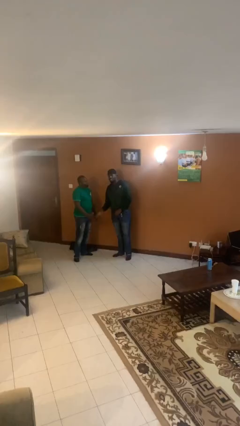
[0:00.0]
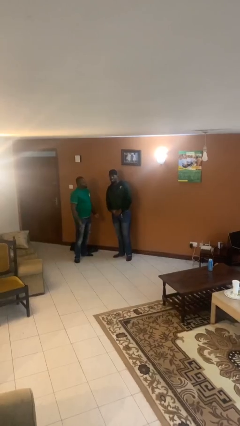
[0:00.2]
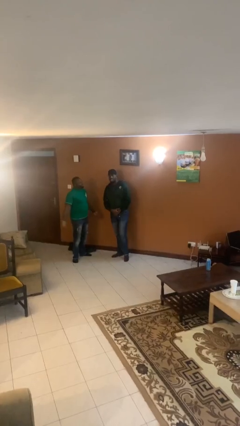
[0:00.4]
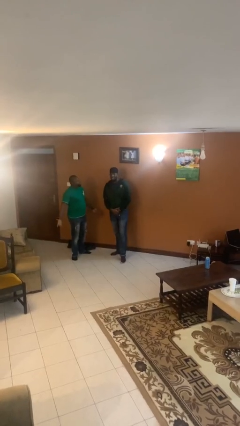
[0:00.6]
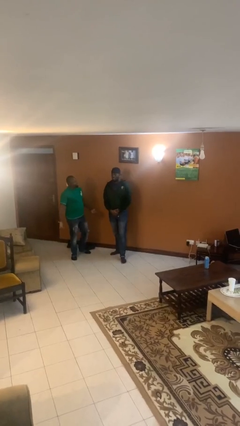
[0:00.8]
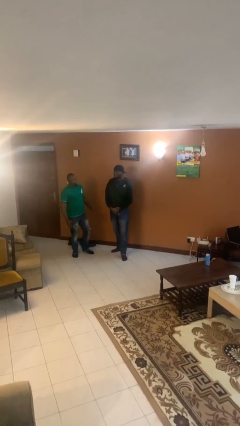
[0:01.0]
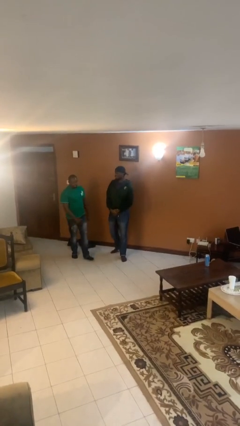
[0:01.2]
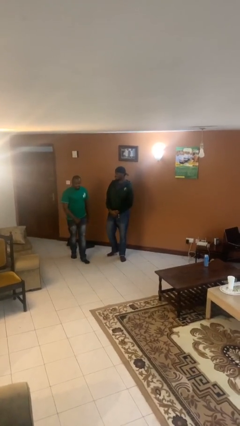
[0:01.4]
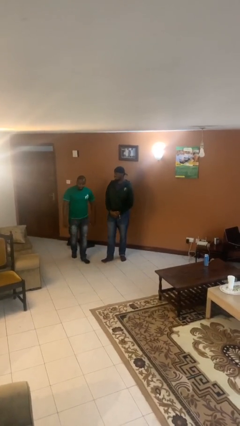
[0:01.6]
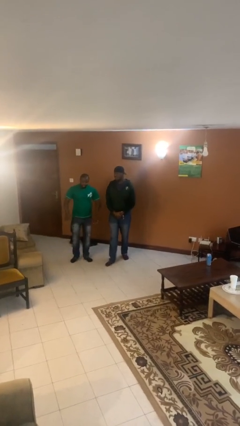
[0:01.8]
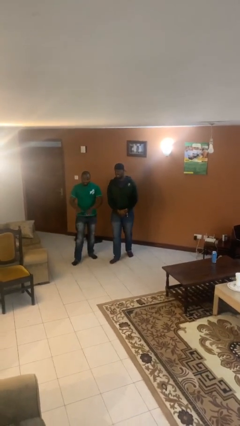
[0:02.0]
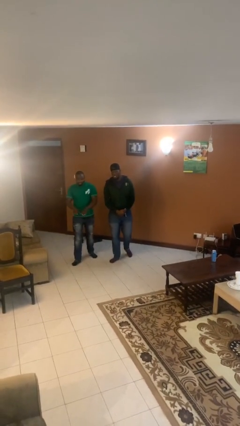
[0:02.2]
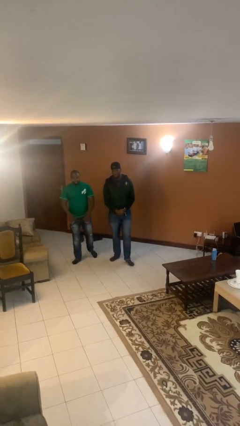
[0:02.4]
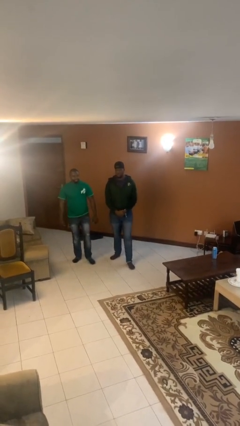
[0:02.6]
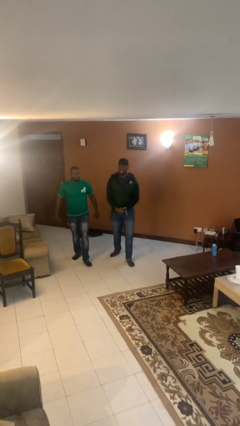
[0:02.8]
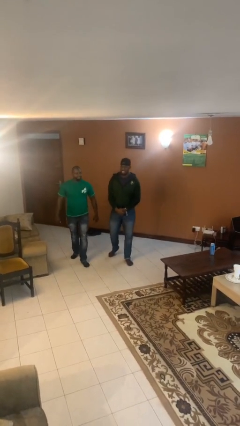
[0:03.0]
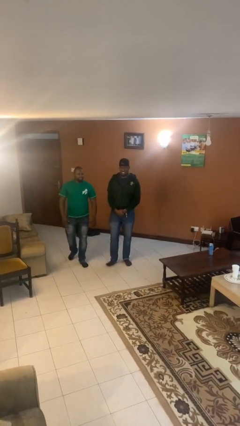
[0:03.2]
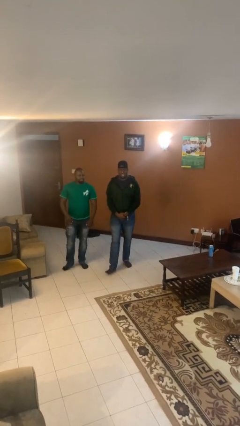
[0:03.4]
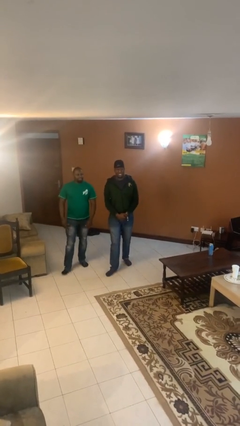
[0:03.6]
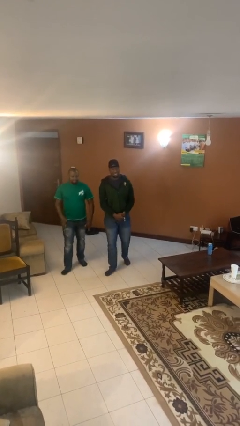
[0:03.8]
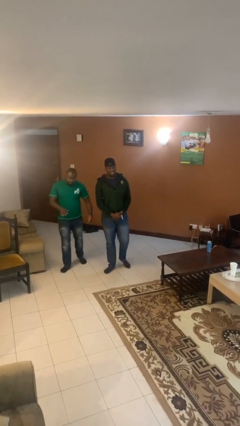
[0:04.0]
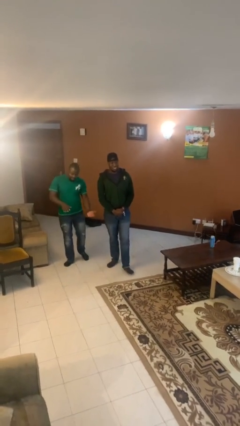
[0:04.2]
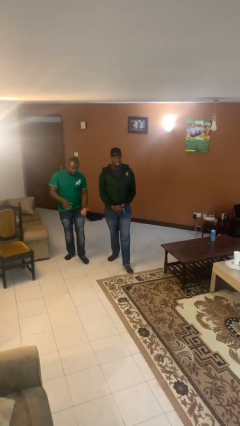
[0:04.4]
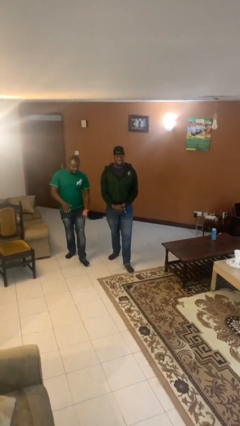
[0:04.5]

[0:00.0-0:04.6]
person talks to person

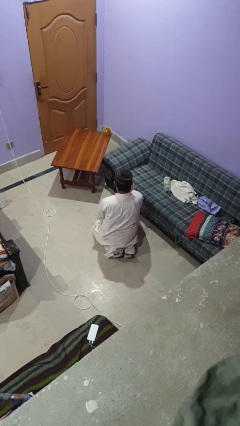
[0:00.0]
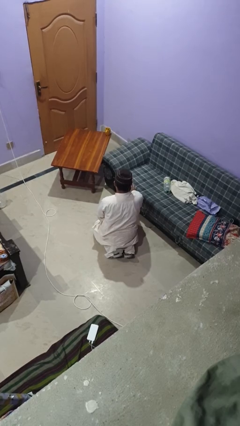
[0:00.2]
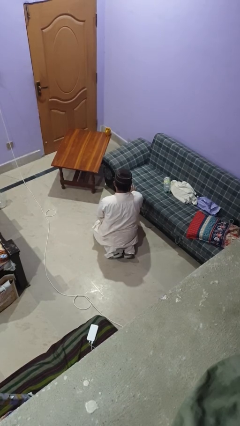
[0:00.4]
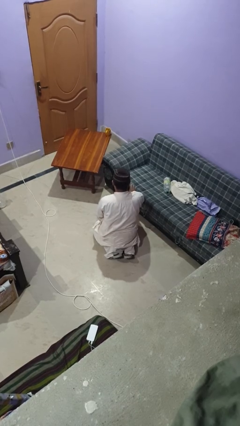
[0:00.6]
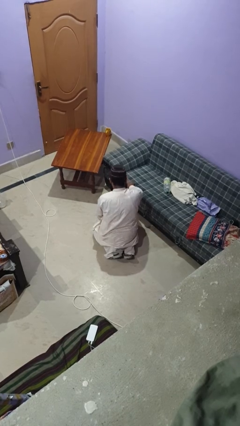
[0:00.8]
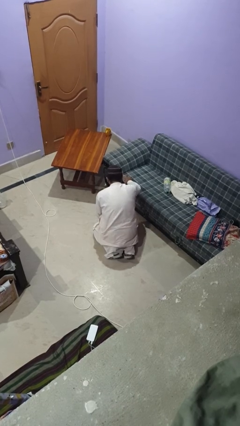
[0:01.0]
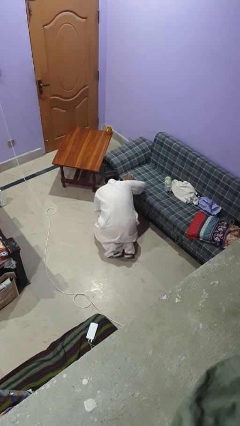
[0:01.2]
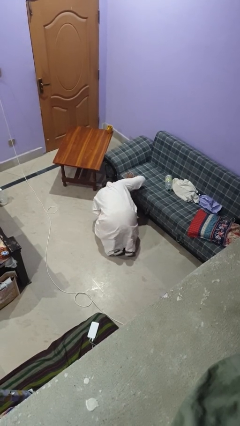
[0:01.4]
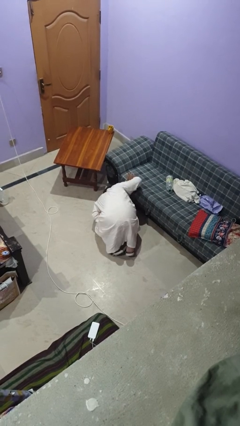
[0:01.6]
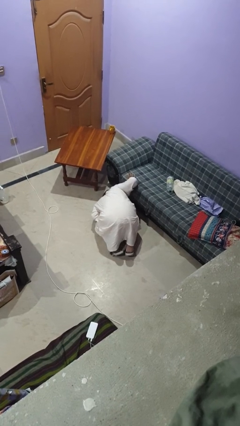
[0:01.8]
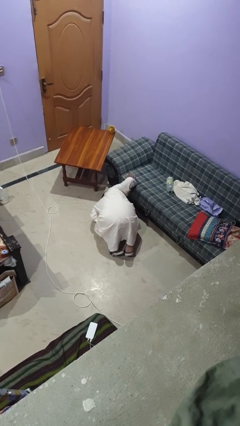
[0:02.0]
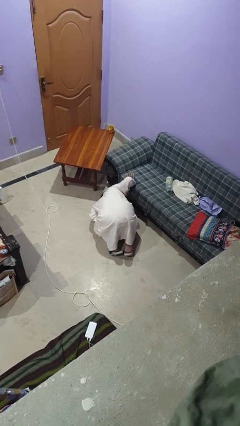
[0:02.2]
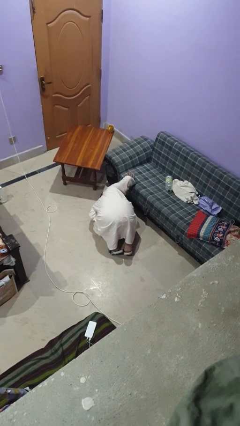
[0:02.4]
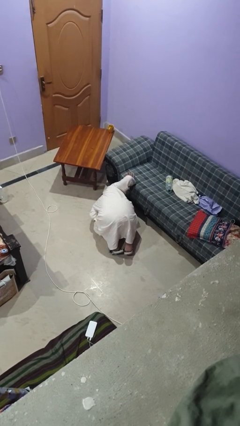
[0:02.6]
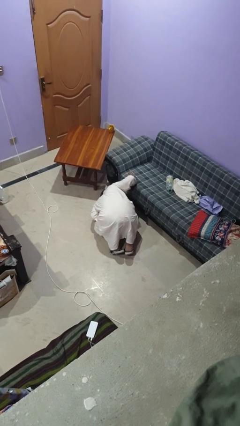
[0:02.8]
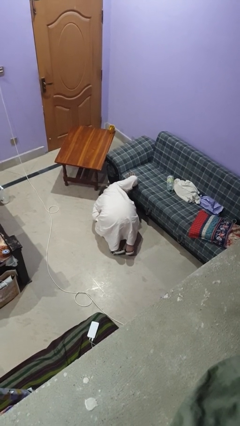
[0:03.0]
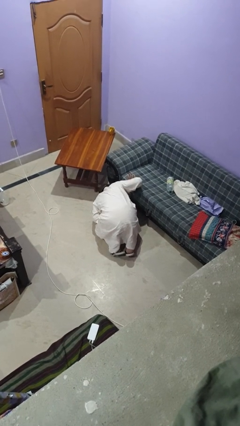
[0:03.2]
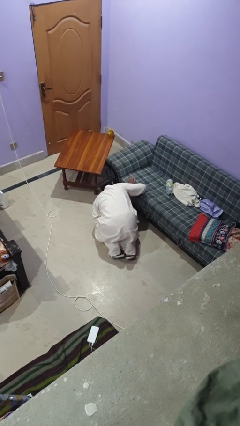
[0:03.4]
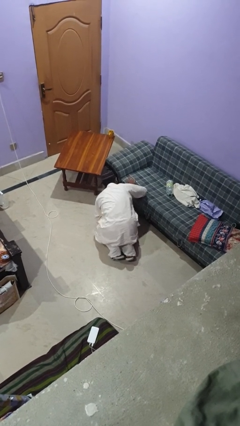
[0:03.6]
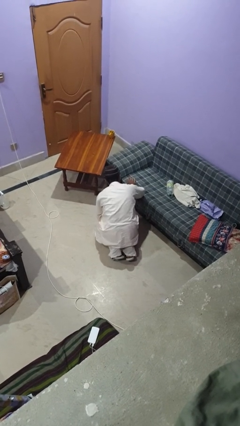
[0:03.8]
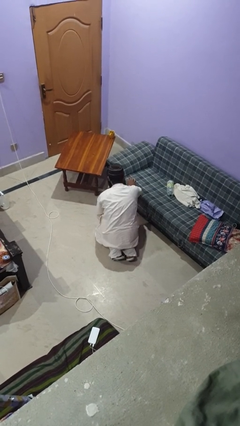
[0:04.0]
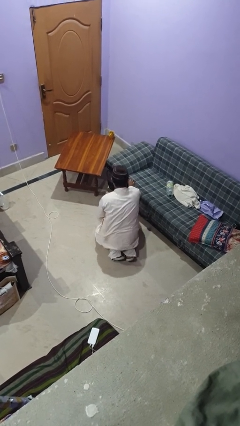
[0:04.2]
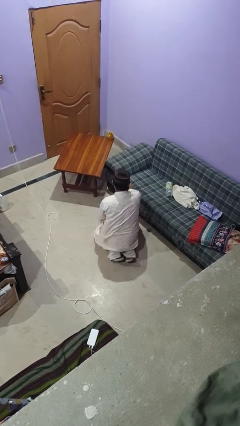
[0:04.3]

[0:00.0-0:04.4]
person searches under couch

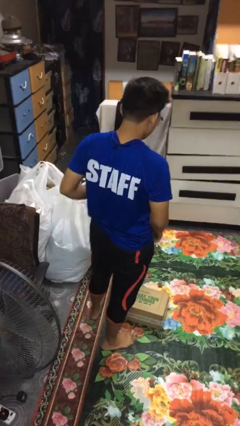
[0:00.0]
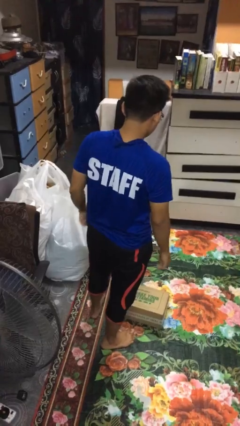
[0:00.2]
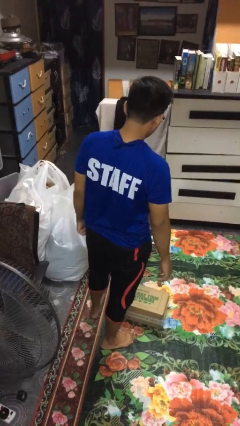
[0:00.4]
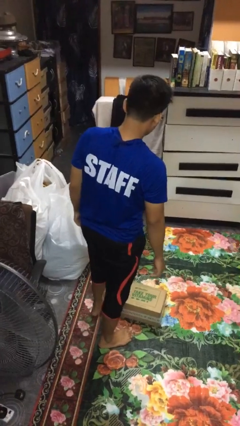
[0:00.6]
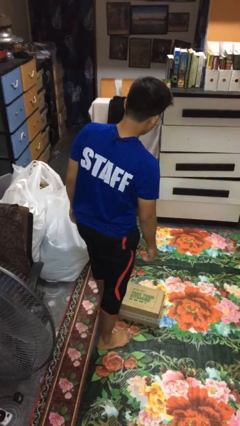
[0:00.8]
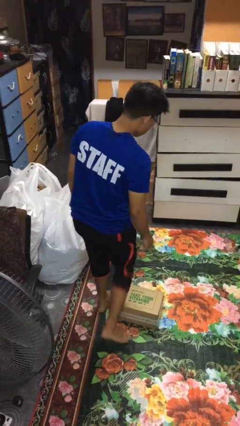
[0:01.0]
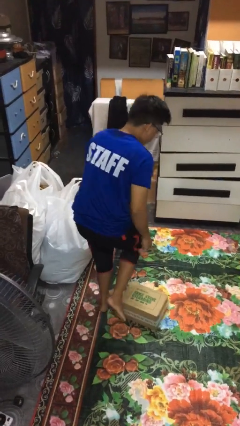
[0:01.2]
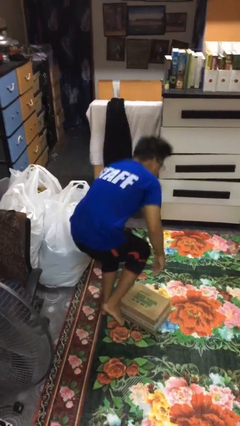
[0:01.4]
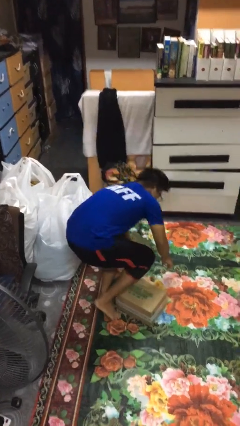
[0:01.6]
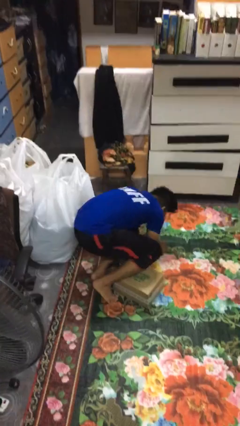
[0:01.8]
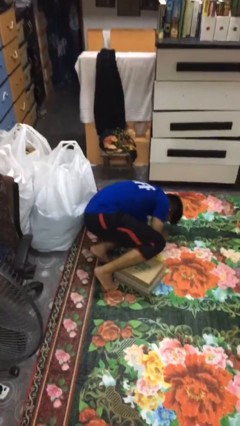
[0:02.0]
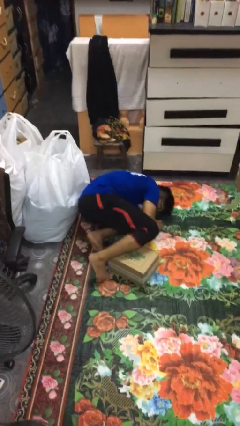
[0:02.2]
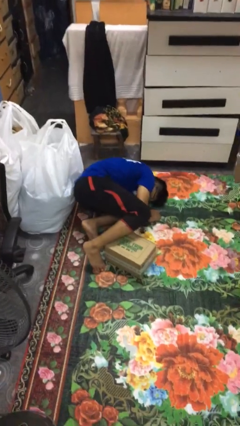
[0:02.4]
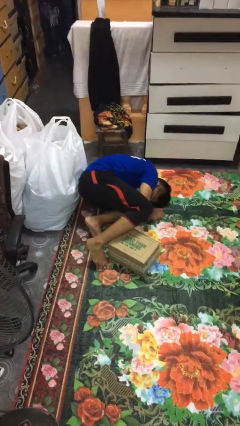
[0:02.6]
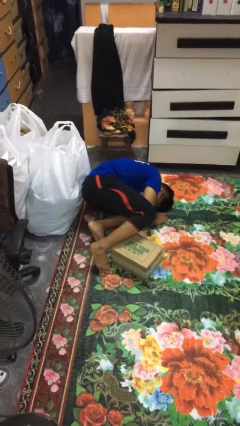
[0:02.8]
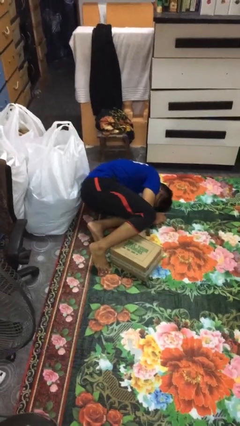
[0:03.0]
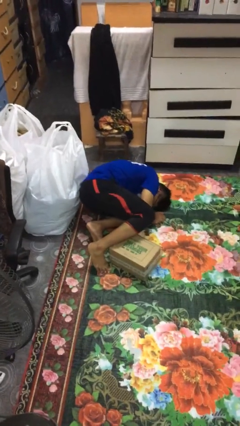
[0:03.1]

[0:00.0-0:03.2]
person trips on object on floor

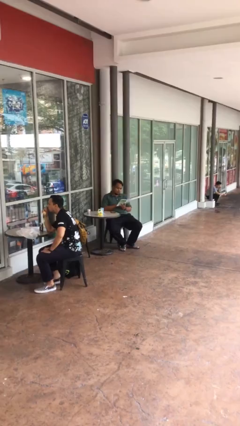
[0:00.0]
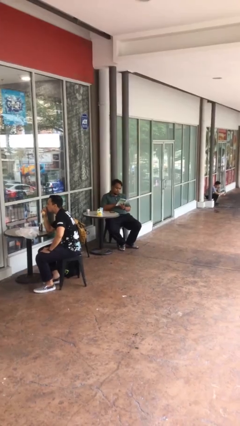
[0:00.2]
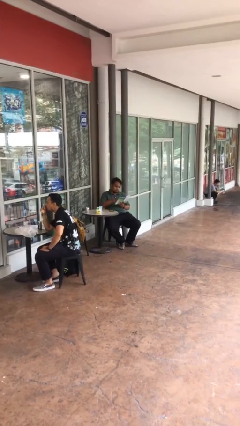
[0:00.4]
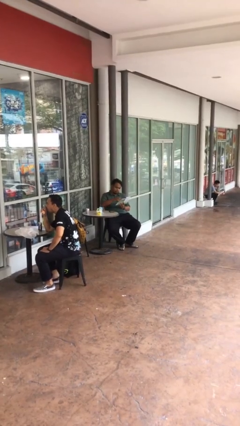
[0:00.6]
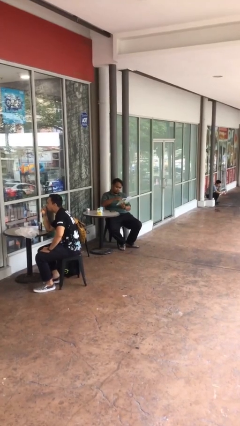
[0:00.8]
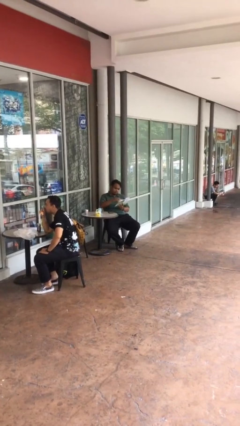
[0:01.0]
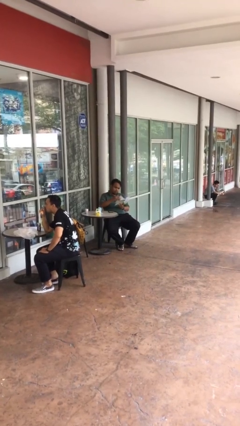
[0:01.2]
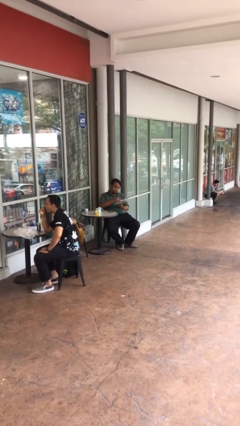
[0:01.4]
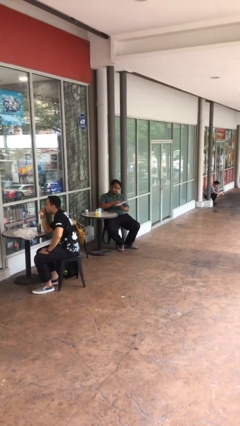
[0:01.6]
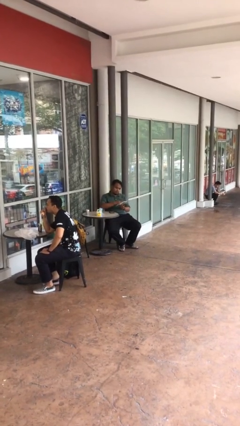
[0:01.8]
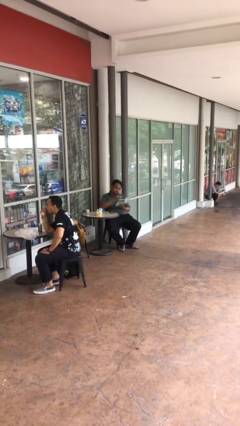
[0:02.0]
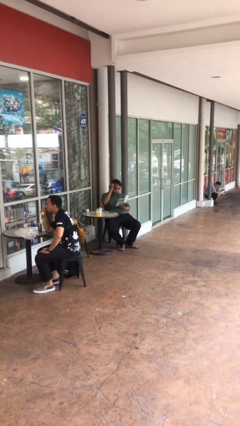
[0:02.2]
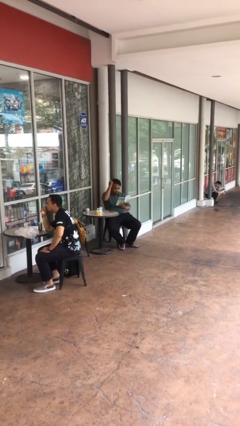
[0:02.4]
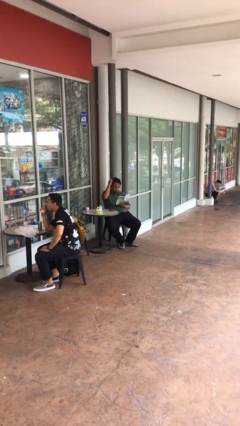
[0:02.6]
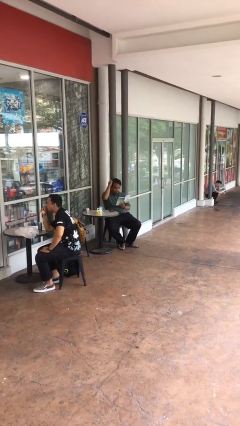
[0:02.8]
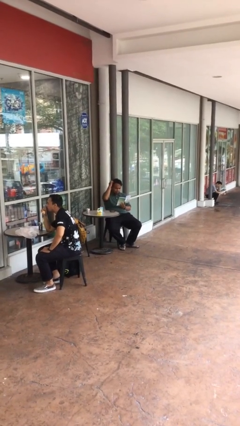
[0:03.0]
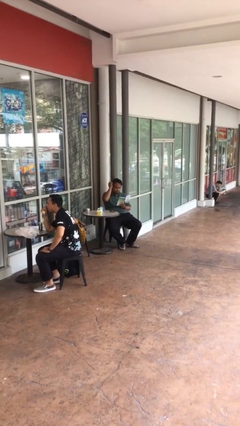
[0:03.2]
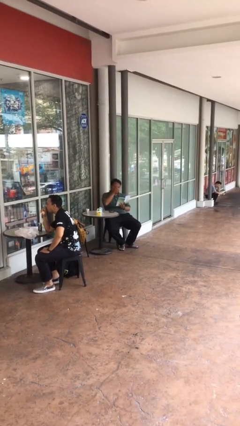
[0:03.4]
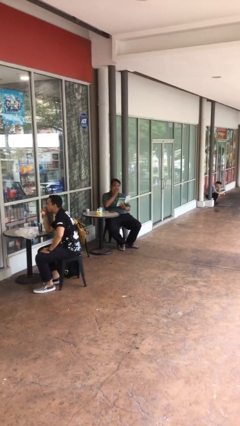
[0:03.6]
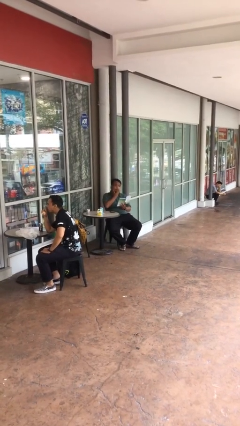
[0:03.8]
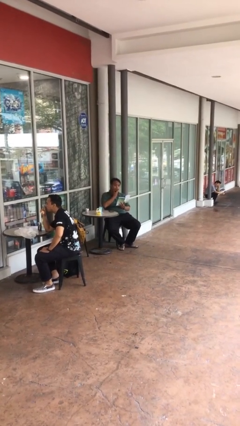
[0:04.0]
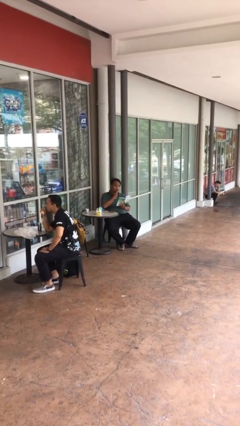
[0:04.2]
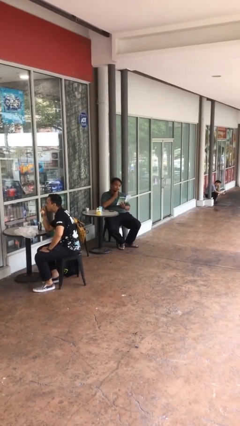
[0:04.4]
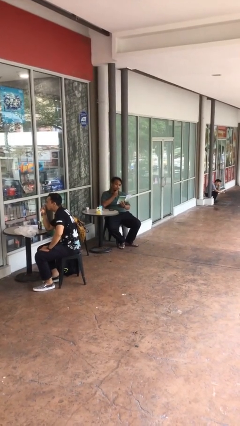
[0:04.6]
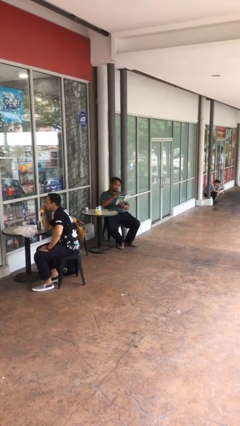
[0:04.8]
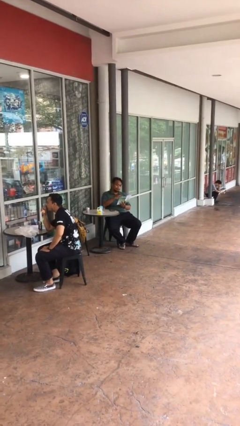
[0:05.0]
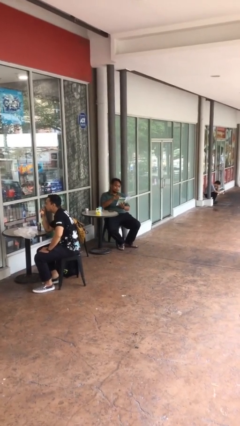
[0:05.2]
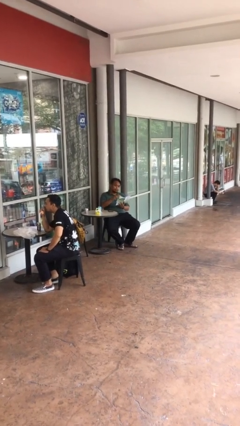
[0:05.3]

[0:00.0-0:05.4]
person reads document

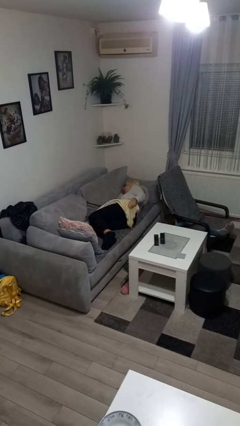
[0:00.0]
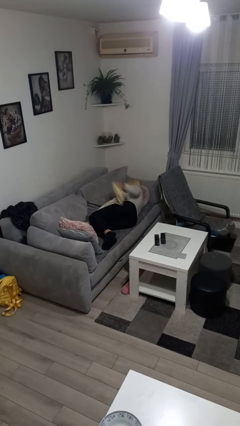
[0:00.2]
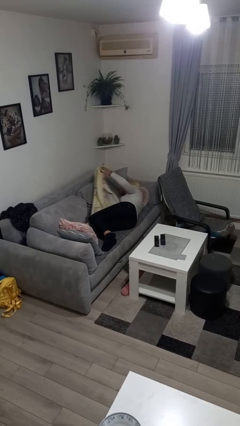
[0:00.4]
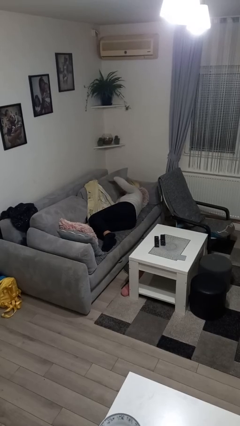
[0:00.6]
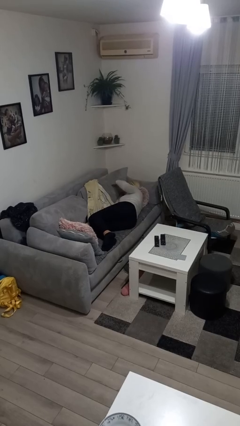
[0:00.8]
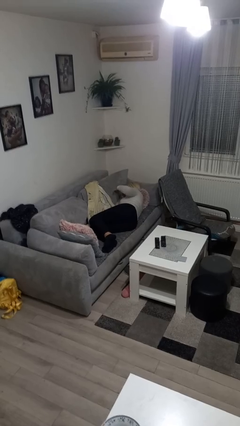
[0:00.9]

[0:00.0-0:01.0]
person uncovers with blanket
